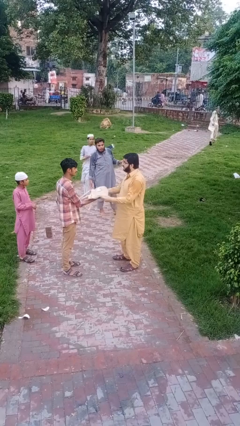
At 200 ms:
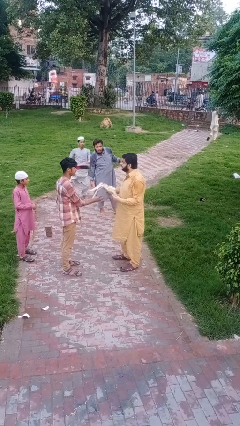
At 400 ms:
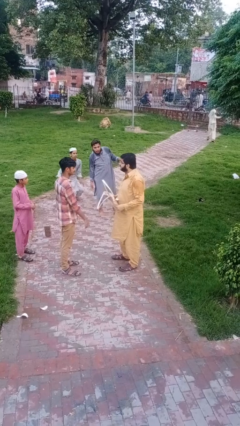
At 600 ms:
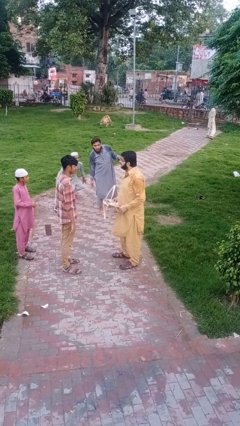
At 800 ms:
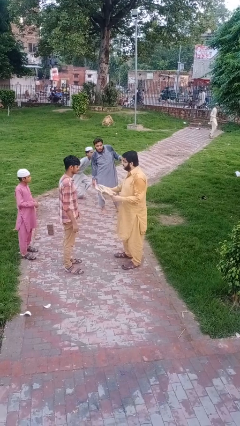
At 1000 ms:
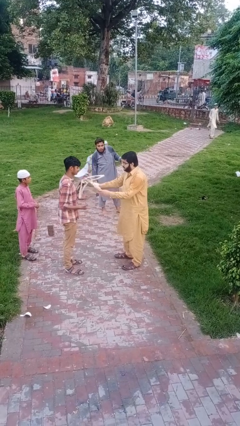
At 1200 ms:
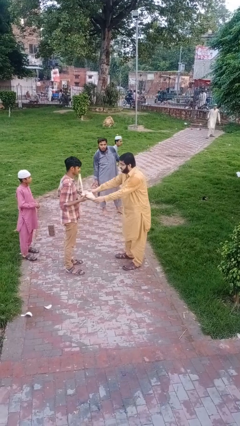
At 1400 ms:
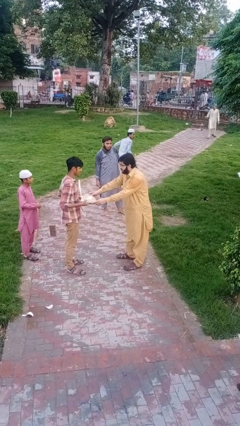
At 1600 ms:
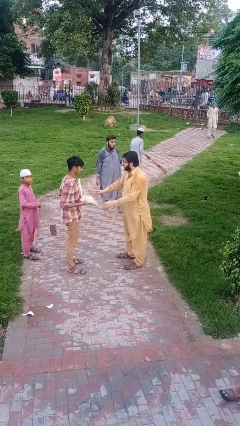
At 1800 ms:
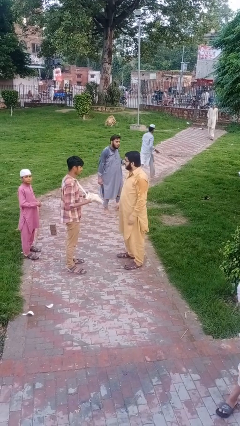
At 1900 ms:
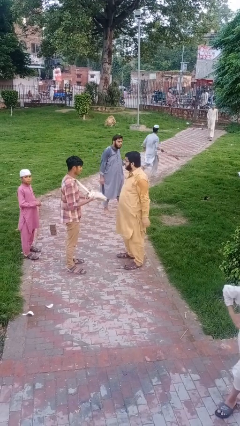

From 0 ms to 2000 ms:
person transfers object to person

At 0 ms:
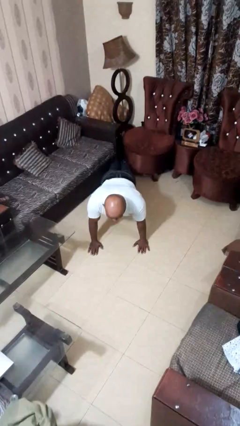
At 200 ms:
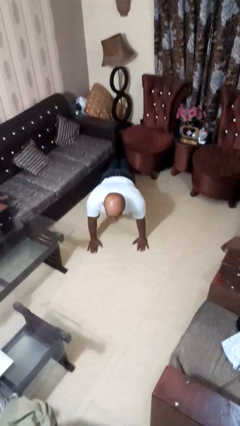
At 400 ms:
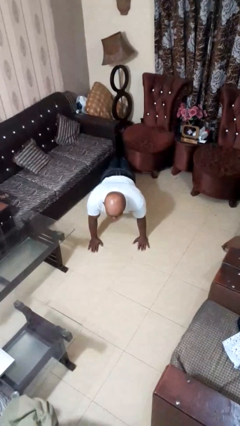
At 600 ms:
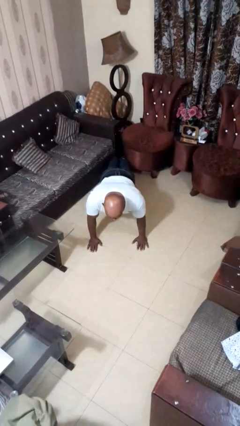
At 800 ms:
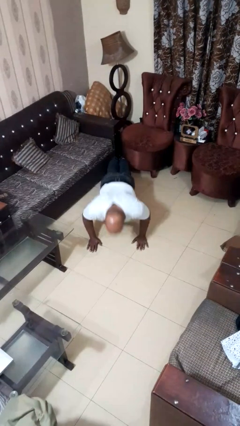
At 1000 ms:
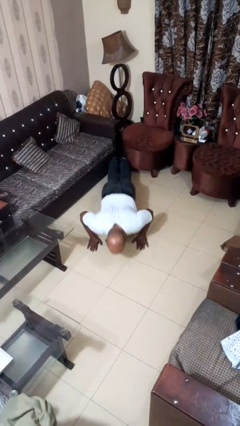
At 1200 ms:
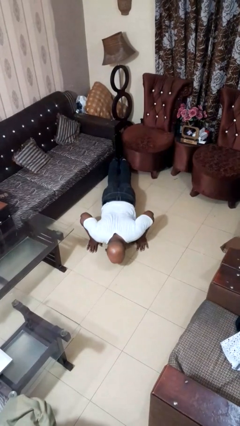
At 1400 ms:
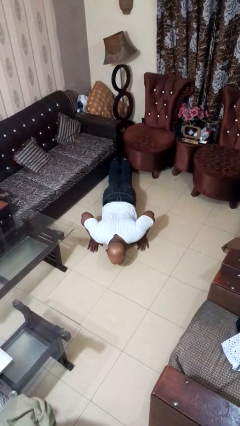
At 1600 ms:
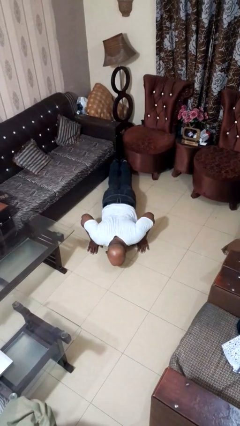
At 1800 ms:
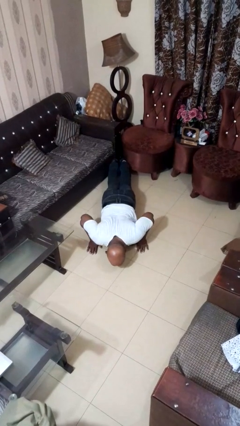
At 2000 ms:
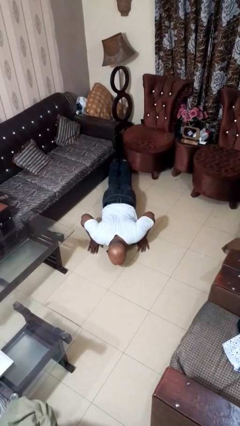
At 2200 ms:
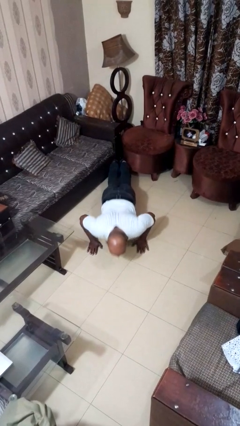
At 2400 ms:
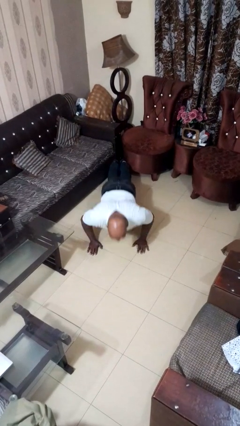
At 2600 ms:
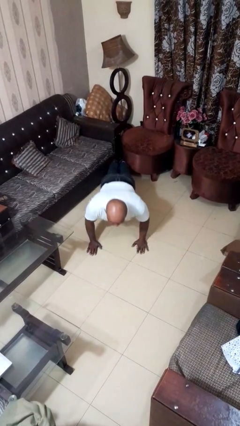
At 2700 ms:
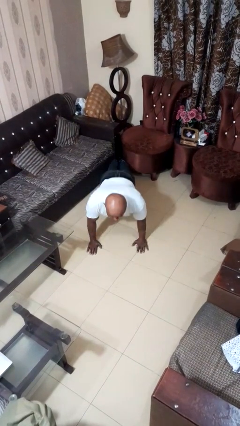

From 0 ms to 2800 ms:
person exercises with pushup

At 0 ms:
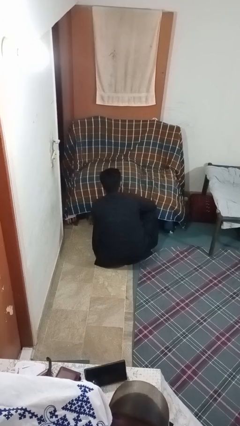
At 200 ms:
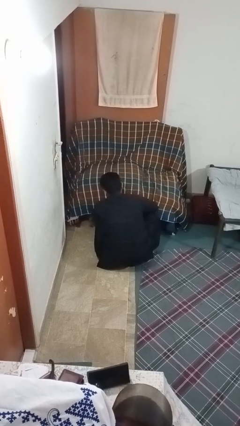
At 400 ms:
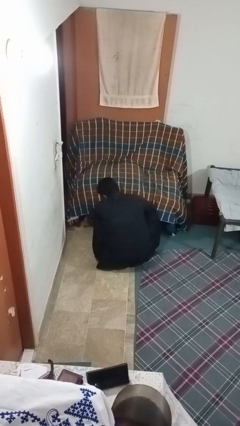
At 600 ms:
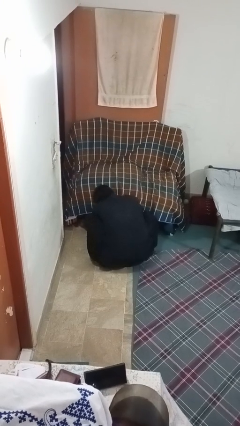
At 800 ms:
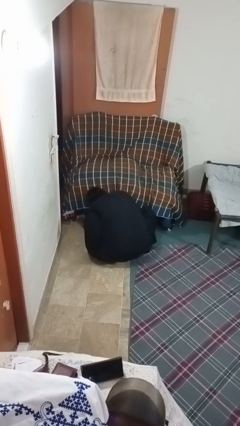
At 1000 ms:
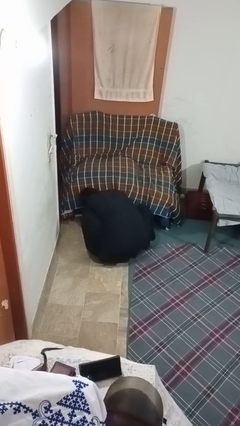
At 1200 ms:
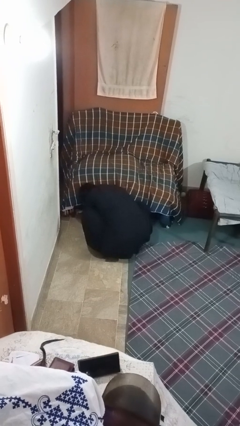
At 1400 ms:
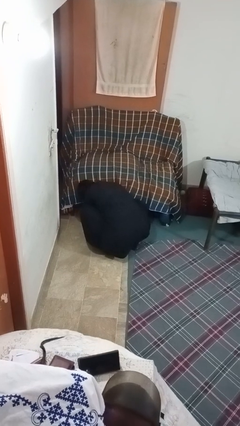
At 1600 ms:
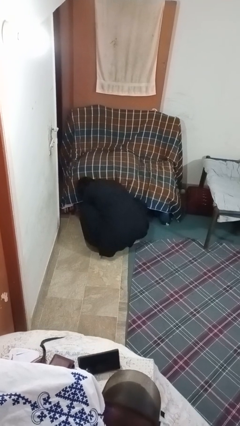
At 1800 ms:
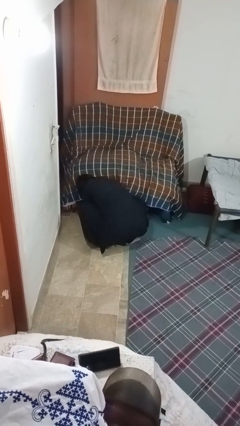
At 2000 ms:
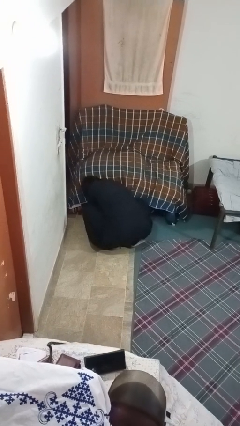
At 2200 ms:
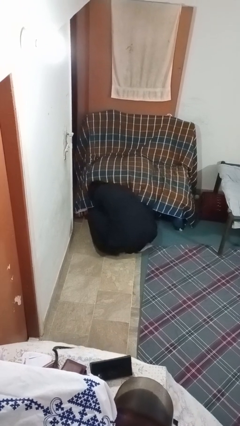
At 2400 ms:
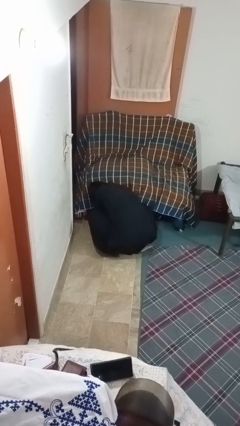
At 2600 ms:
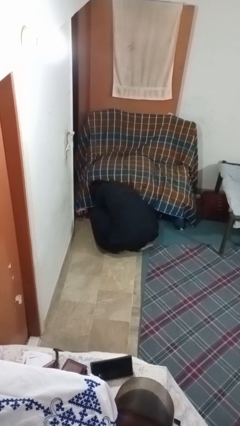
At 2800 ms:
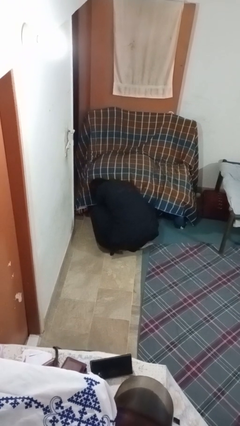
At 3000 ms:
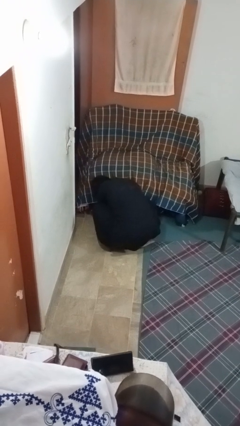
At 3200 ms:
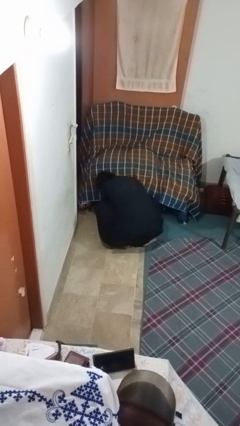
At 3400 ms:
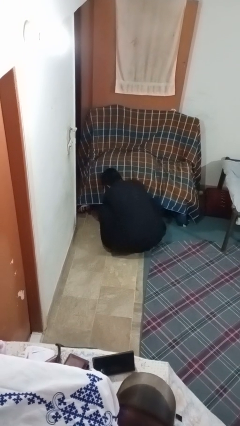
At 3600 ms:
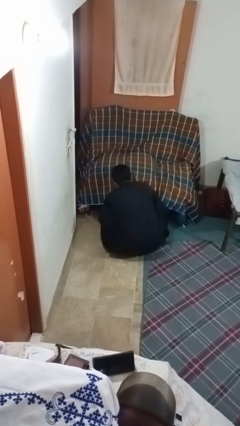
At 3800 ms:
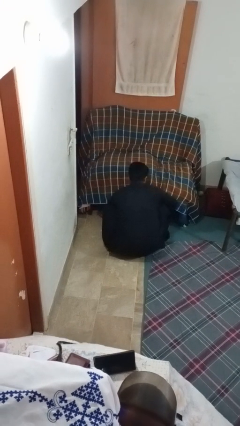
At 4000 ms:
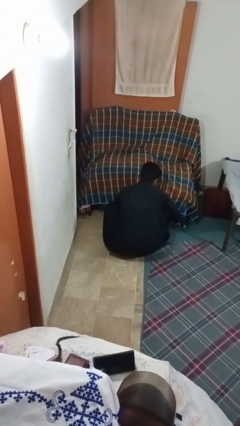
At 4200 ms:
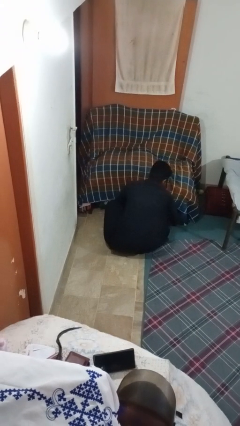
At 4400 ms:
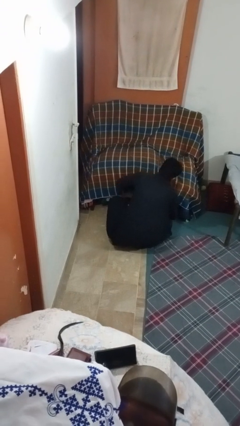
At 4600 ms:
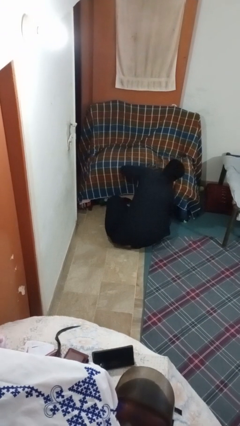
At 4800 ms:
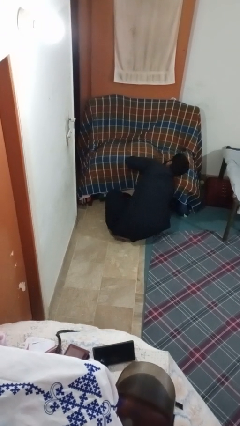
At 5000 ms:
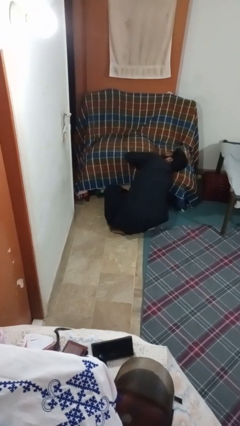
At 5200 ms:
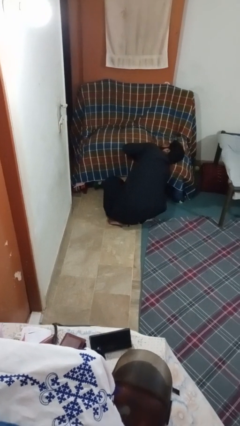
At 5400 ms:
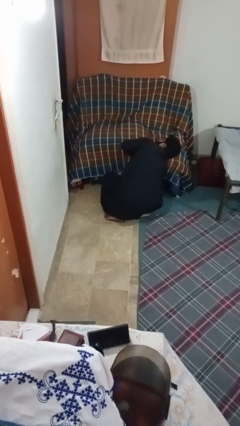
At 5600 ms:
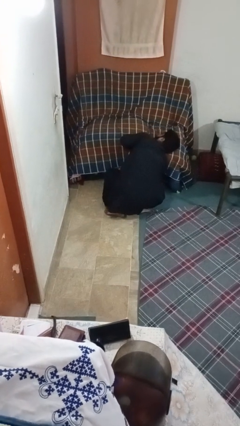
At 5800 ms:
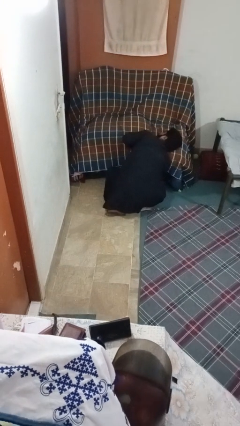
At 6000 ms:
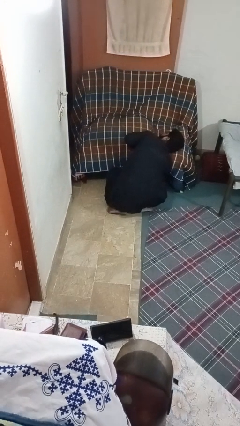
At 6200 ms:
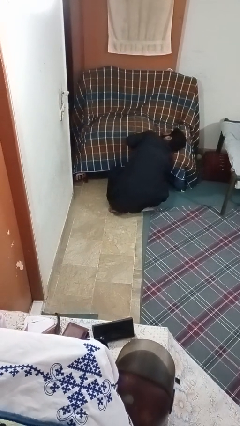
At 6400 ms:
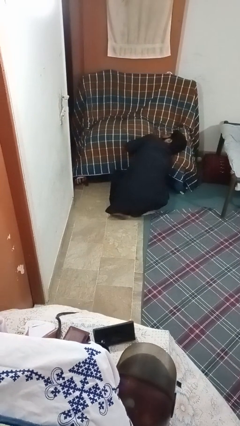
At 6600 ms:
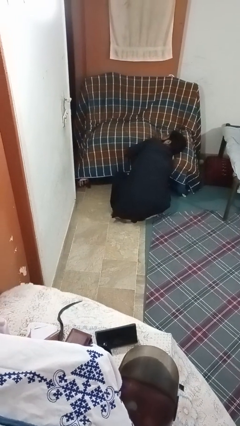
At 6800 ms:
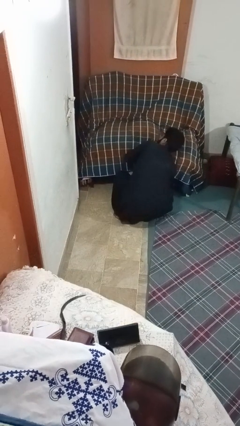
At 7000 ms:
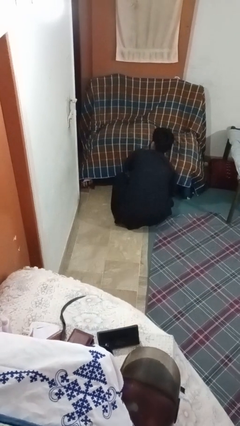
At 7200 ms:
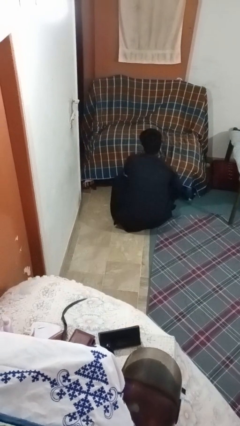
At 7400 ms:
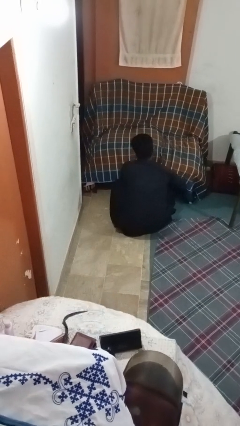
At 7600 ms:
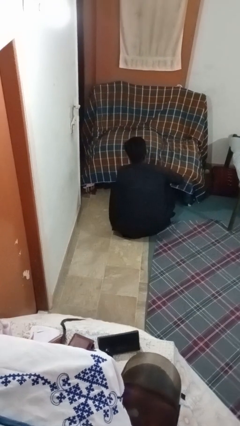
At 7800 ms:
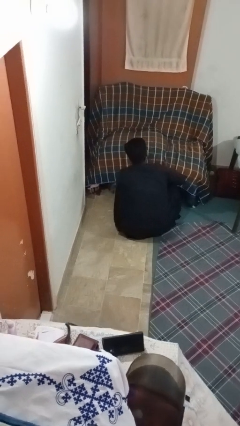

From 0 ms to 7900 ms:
person searches under couch

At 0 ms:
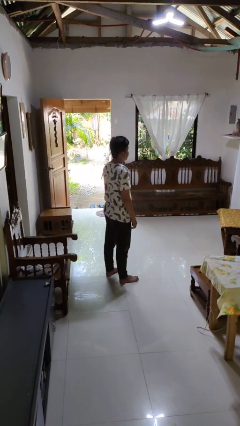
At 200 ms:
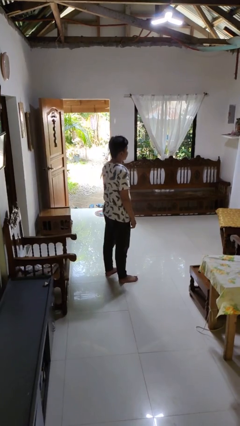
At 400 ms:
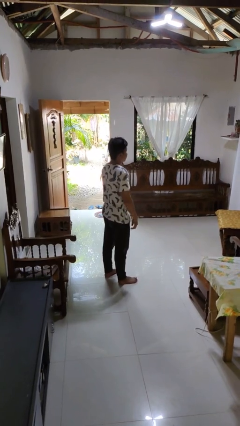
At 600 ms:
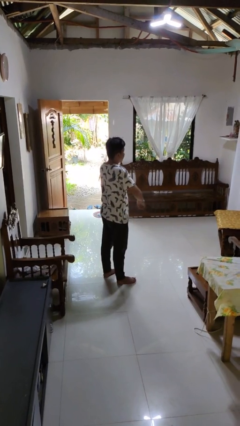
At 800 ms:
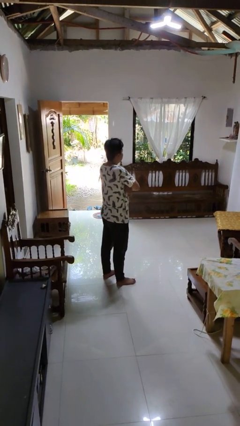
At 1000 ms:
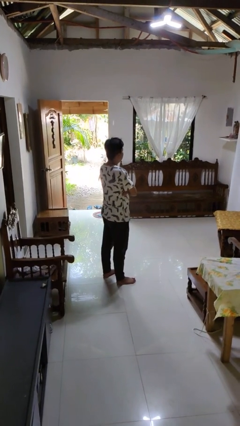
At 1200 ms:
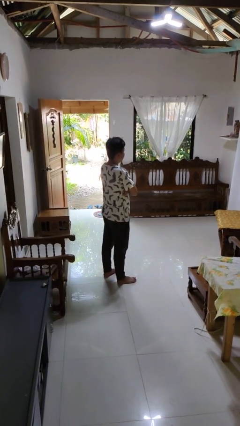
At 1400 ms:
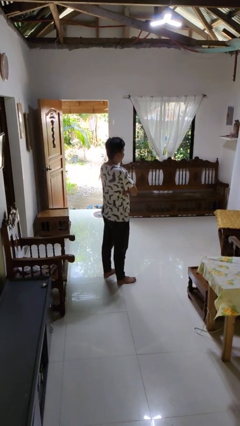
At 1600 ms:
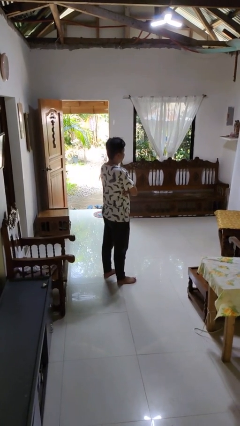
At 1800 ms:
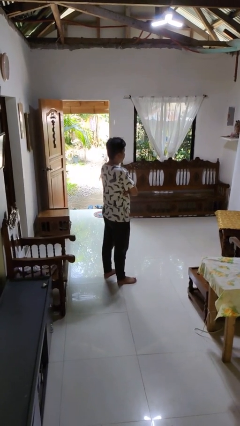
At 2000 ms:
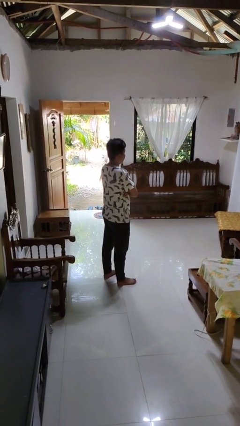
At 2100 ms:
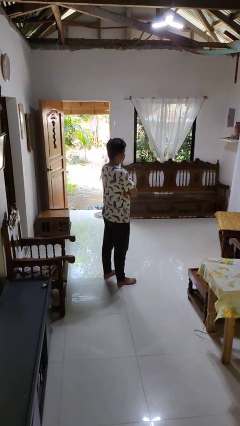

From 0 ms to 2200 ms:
person crosses arms

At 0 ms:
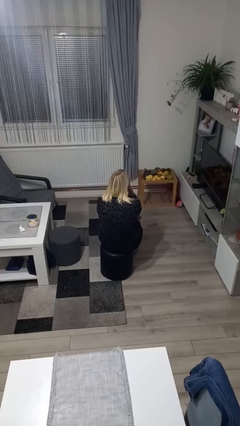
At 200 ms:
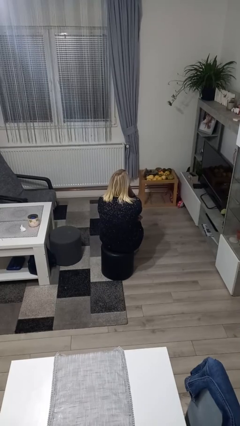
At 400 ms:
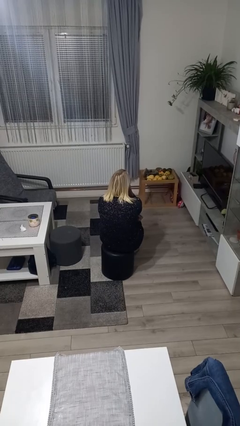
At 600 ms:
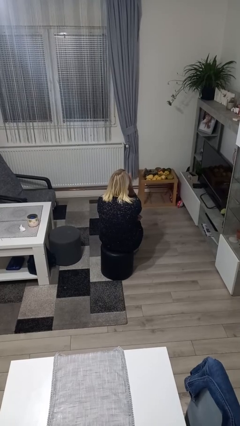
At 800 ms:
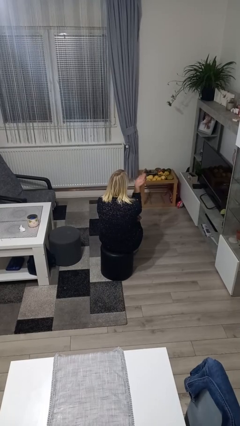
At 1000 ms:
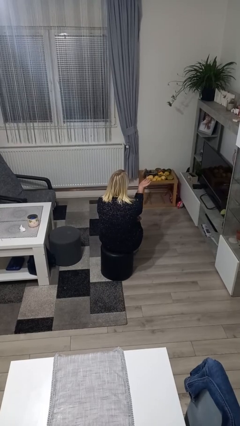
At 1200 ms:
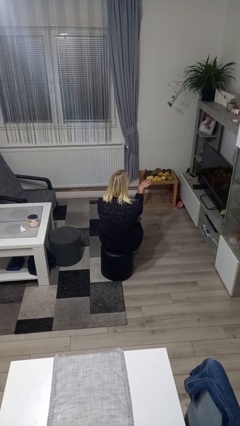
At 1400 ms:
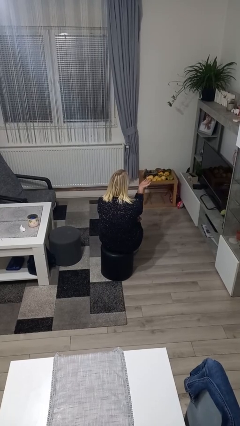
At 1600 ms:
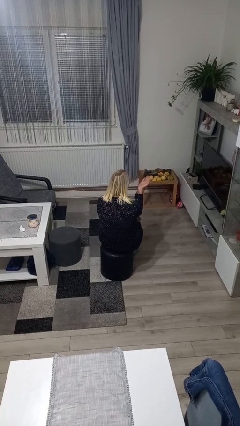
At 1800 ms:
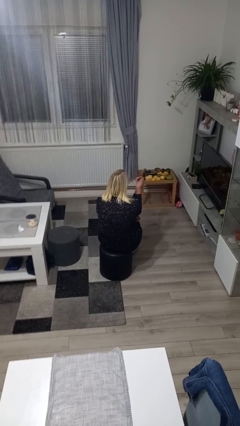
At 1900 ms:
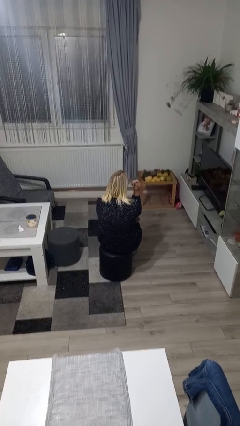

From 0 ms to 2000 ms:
person gestures blow kiss

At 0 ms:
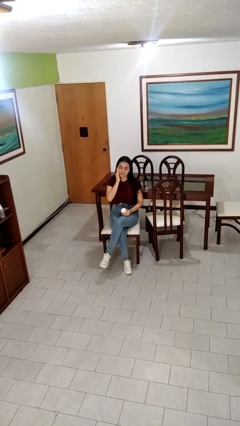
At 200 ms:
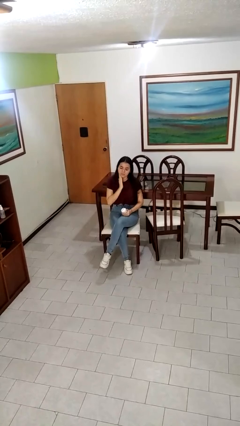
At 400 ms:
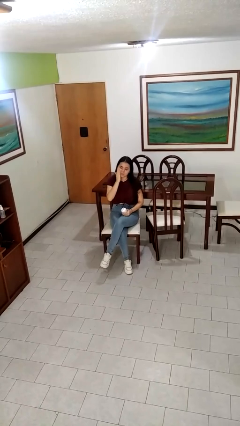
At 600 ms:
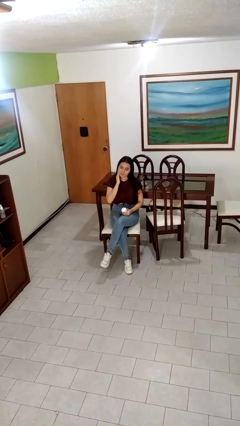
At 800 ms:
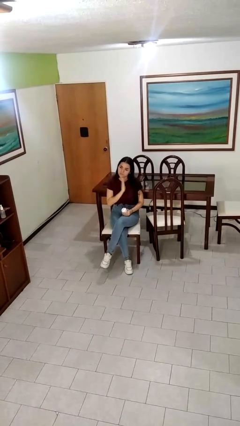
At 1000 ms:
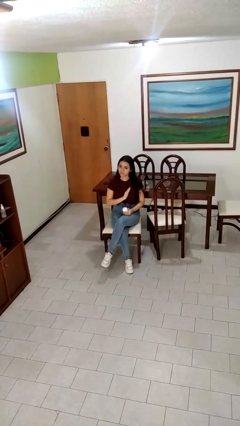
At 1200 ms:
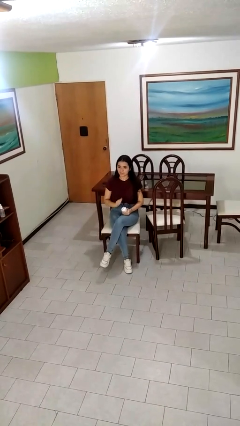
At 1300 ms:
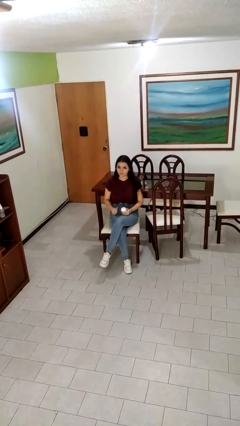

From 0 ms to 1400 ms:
person applies facial moisturizer
